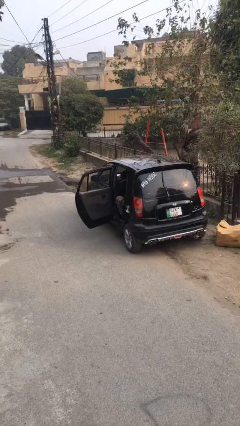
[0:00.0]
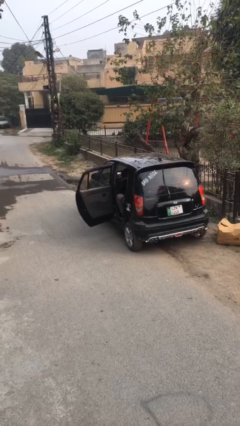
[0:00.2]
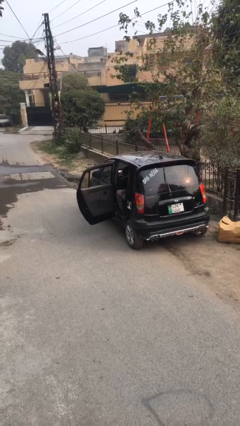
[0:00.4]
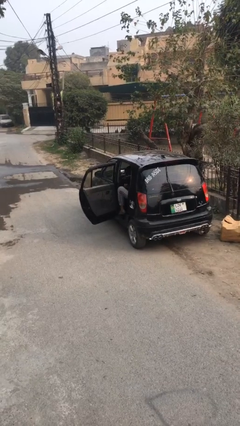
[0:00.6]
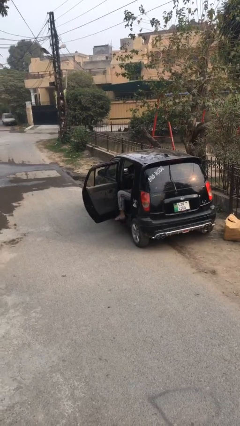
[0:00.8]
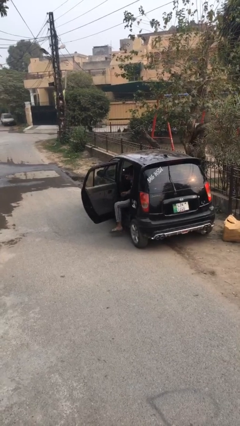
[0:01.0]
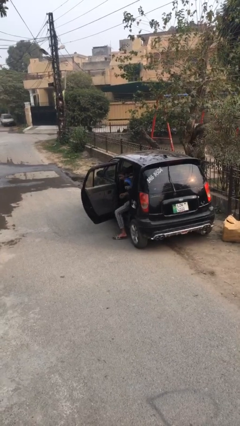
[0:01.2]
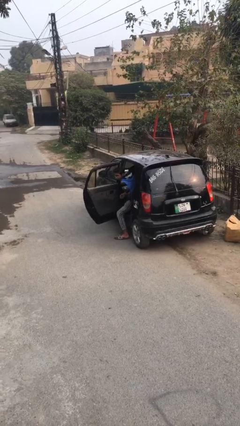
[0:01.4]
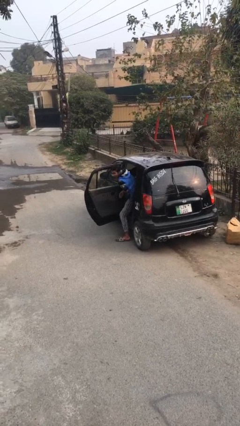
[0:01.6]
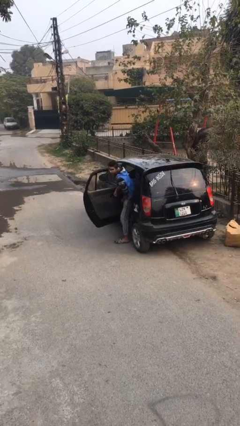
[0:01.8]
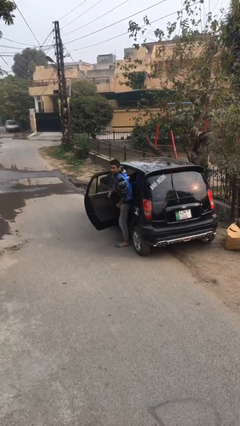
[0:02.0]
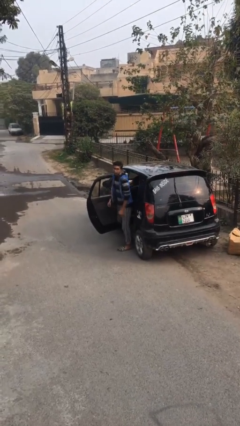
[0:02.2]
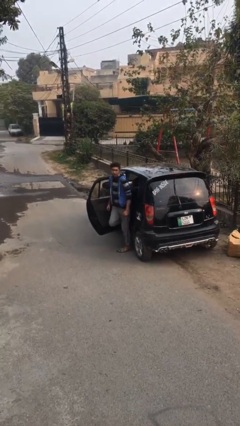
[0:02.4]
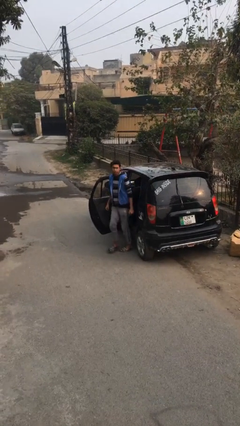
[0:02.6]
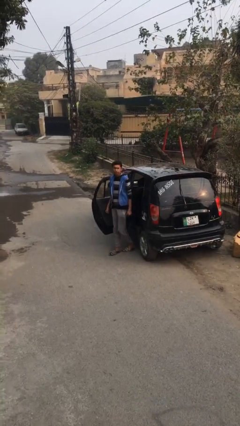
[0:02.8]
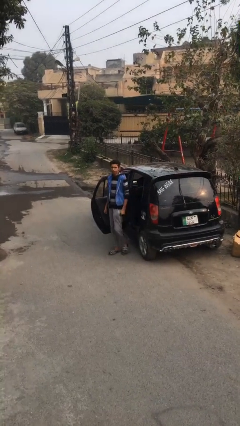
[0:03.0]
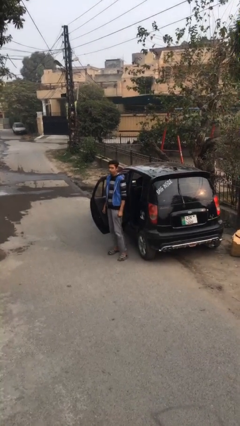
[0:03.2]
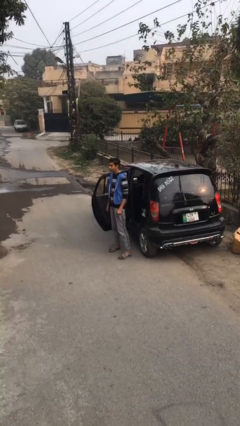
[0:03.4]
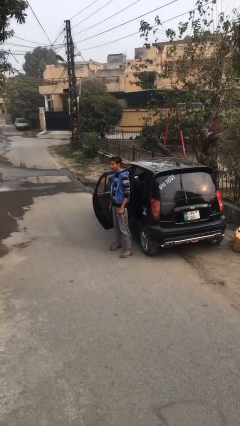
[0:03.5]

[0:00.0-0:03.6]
person exits car

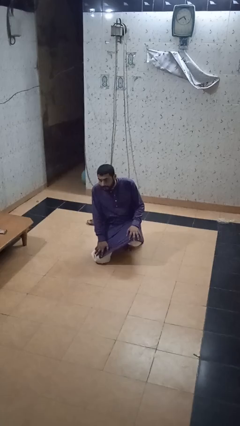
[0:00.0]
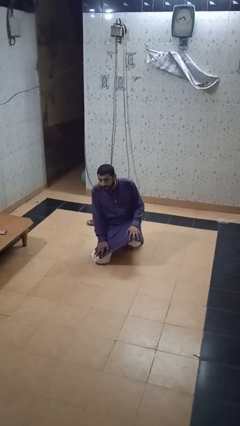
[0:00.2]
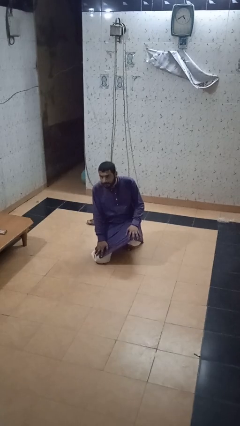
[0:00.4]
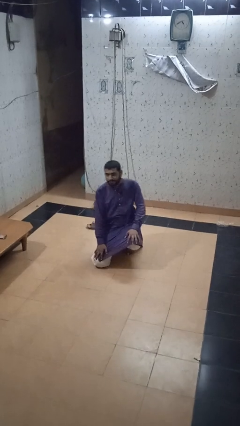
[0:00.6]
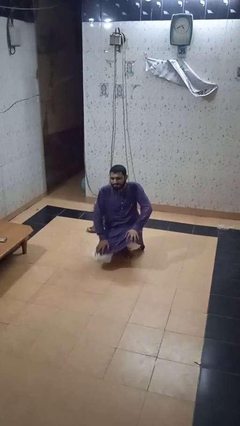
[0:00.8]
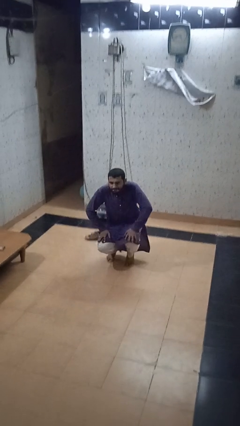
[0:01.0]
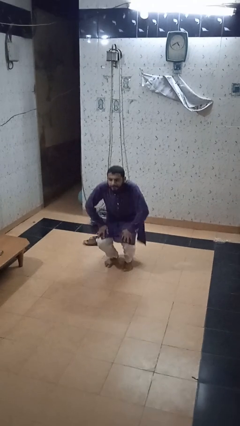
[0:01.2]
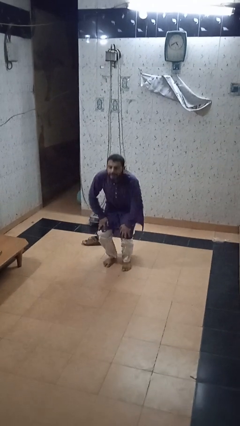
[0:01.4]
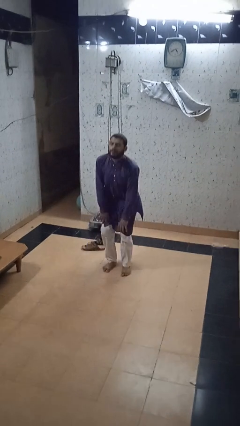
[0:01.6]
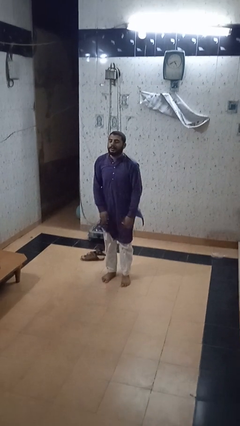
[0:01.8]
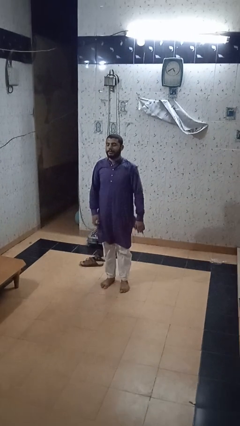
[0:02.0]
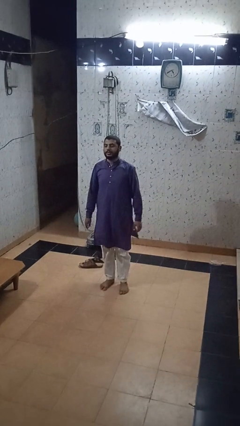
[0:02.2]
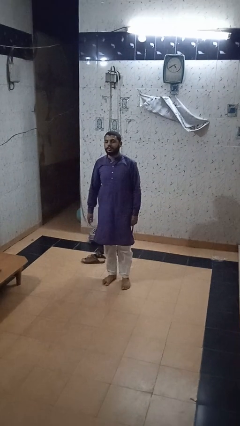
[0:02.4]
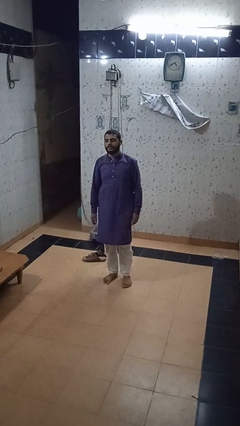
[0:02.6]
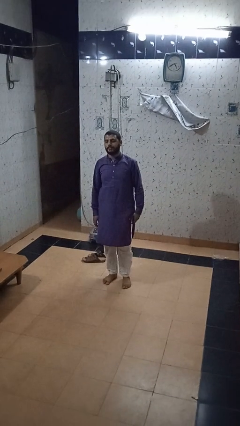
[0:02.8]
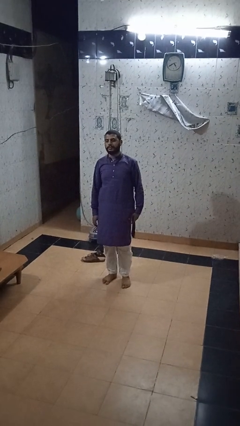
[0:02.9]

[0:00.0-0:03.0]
person stands up from floor

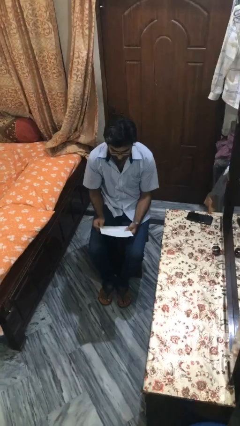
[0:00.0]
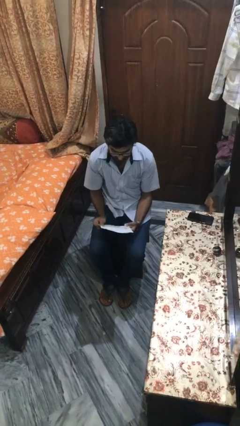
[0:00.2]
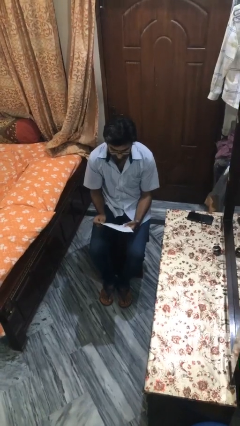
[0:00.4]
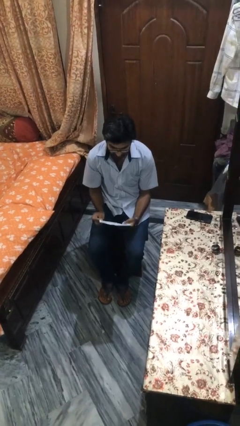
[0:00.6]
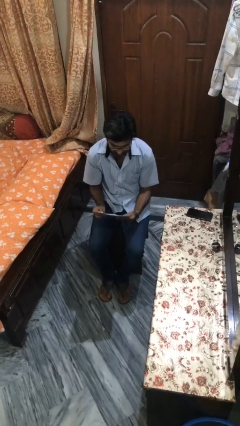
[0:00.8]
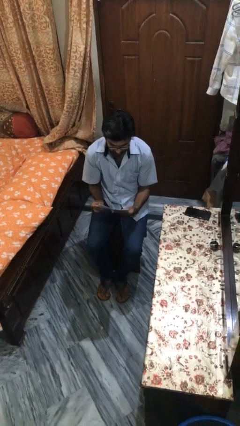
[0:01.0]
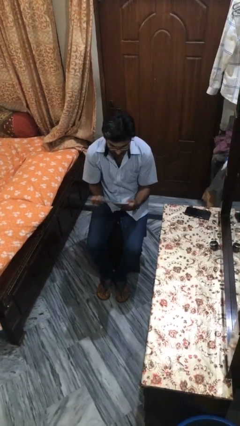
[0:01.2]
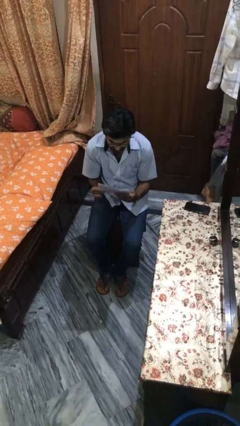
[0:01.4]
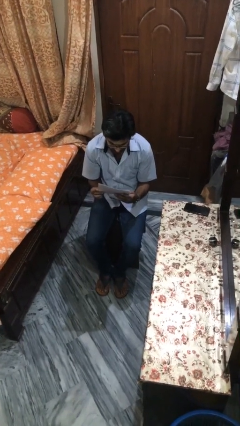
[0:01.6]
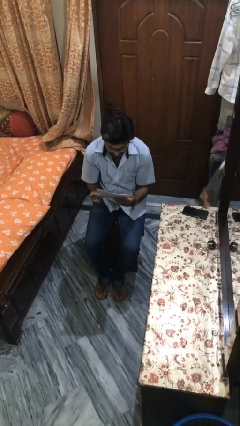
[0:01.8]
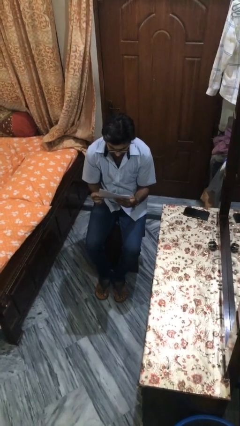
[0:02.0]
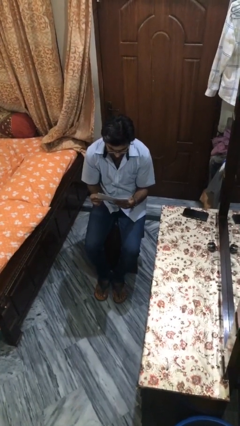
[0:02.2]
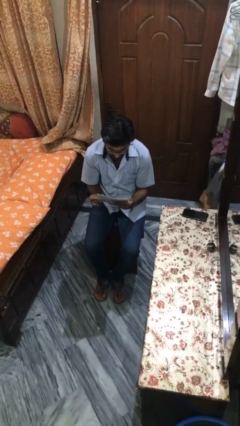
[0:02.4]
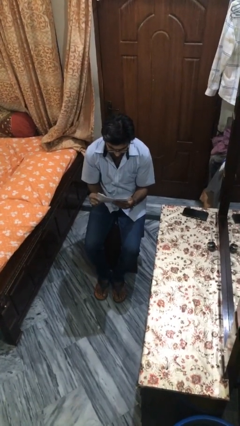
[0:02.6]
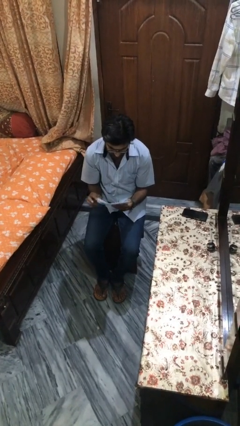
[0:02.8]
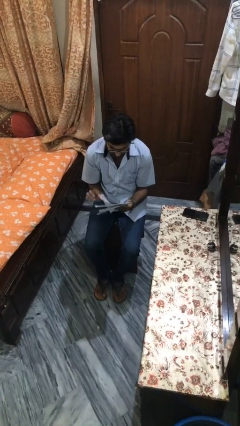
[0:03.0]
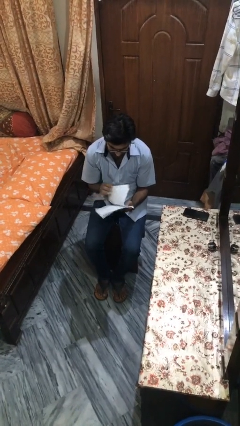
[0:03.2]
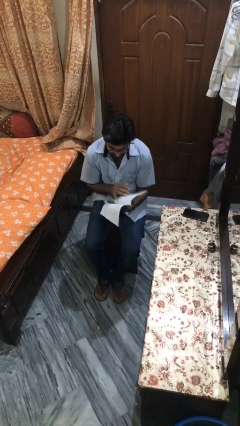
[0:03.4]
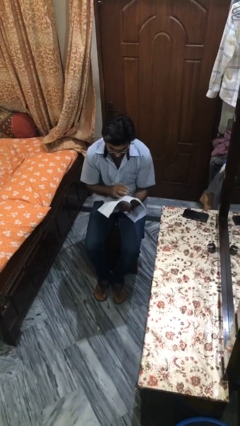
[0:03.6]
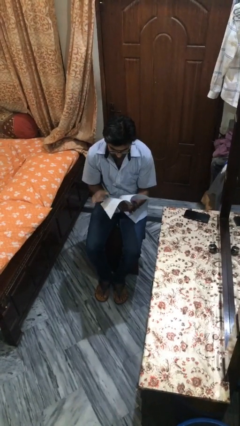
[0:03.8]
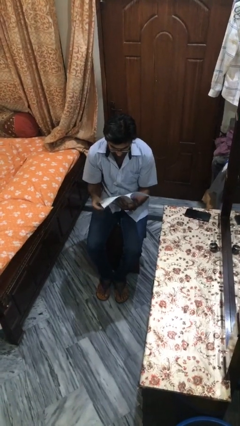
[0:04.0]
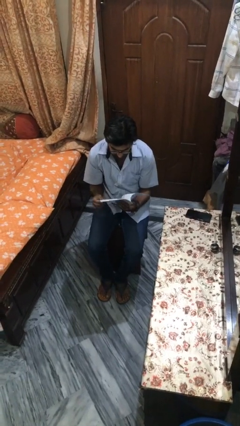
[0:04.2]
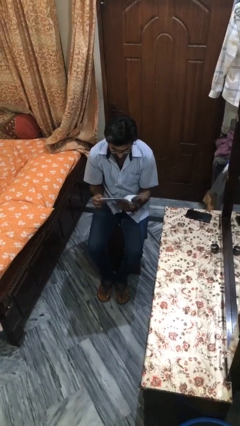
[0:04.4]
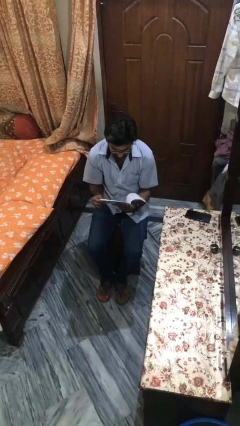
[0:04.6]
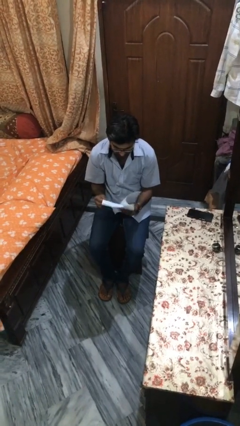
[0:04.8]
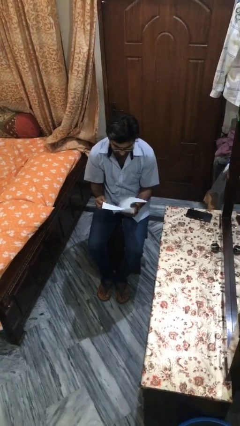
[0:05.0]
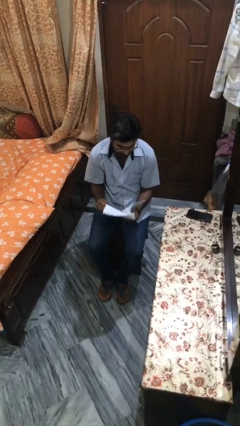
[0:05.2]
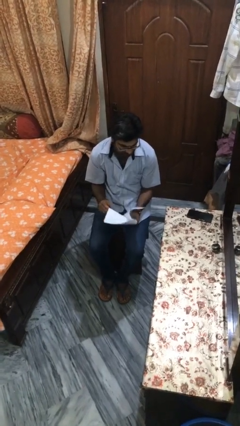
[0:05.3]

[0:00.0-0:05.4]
person reads document

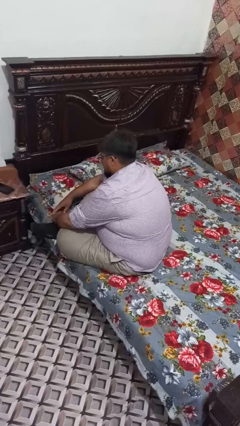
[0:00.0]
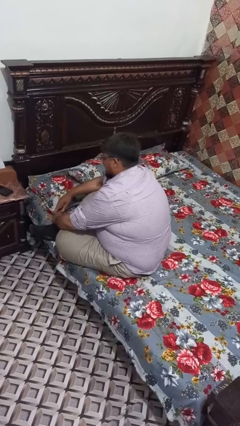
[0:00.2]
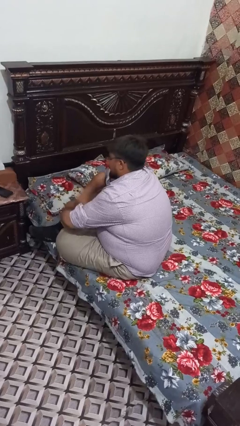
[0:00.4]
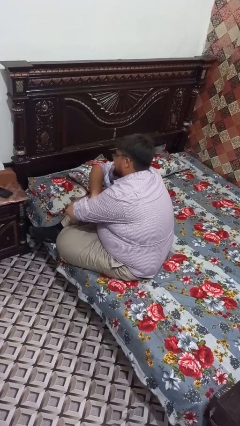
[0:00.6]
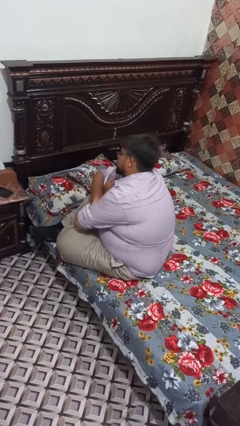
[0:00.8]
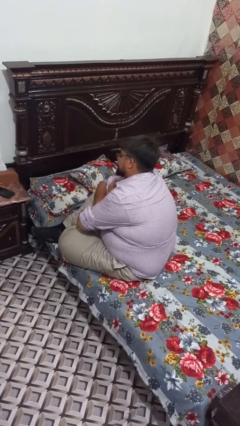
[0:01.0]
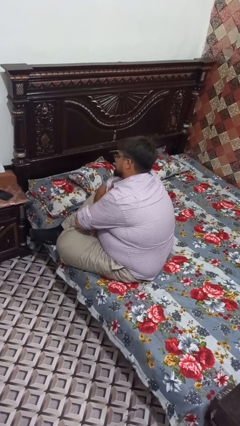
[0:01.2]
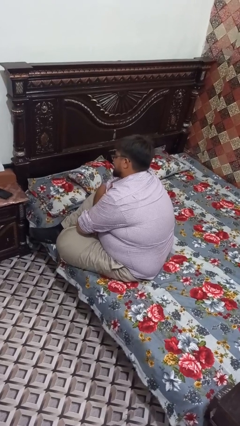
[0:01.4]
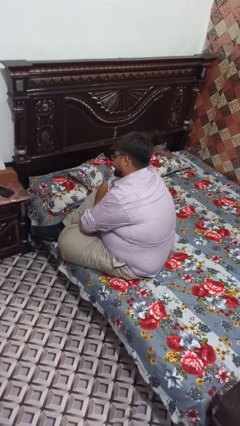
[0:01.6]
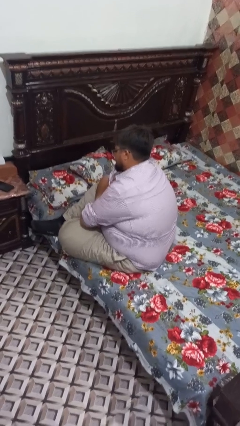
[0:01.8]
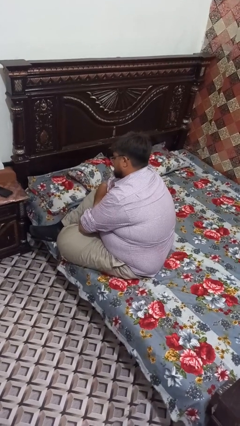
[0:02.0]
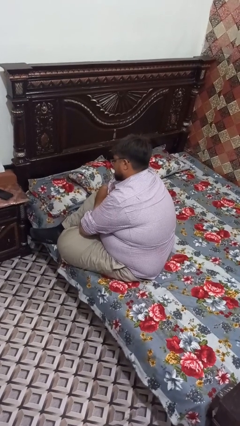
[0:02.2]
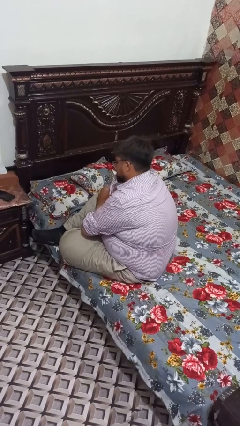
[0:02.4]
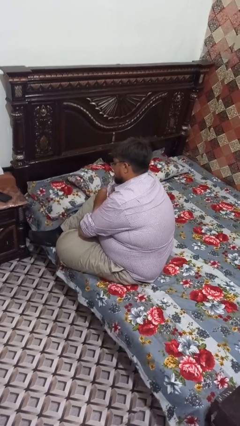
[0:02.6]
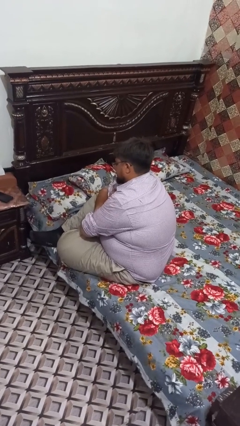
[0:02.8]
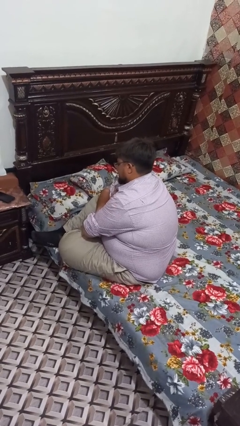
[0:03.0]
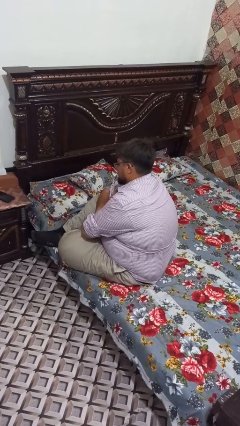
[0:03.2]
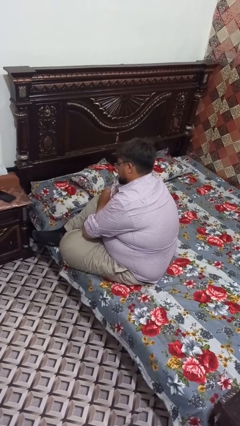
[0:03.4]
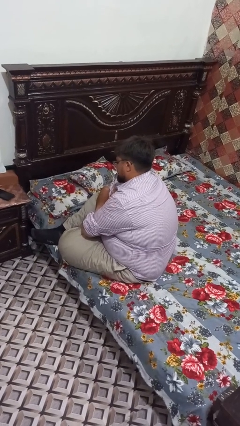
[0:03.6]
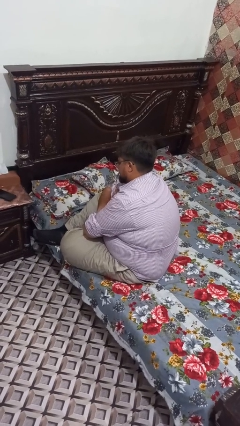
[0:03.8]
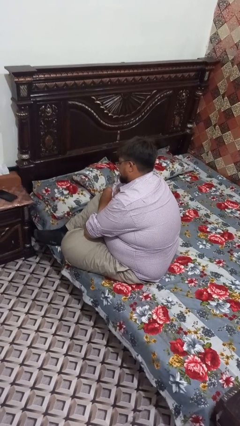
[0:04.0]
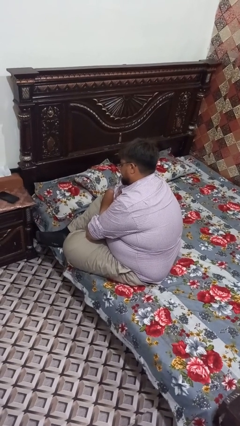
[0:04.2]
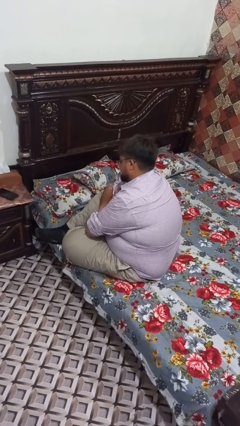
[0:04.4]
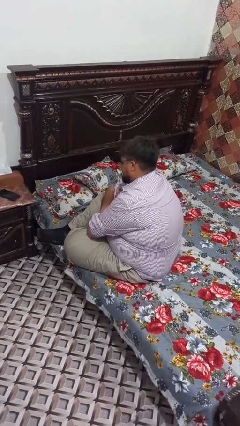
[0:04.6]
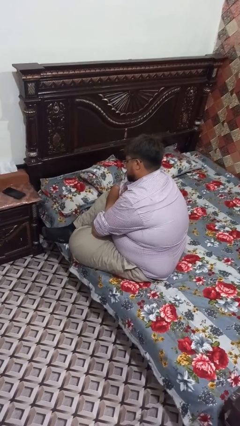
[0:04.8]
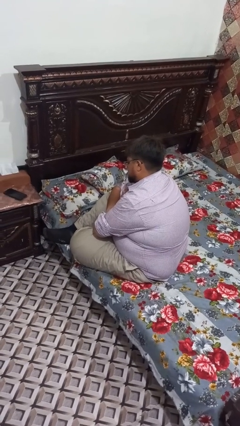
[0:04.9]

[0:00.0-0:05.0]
person crosses arms

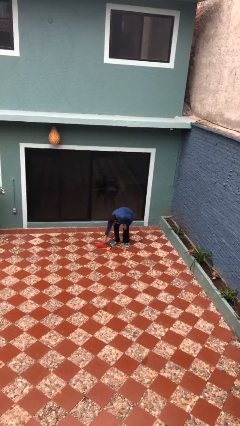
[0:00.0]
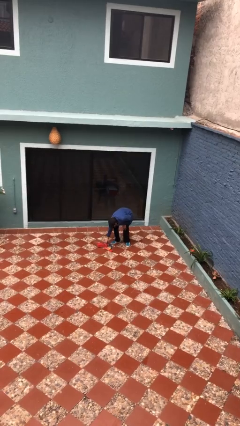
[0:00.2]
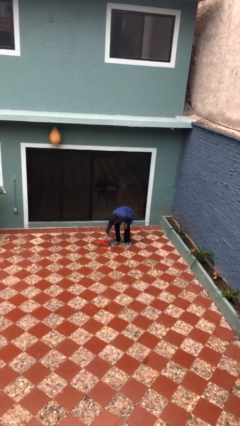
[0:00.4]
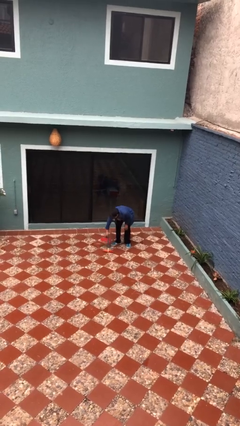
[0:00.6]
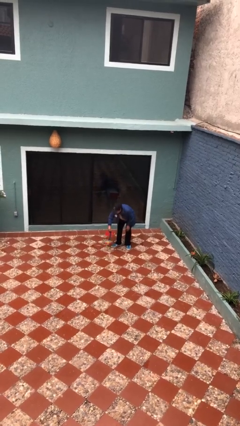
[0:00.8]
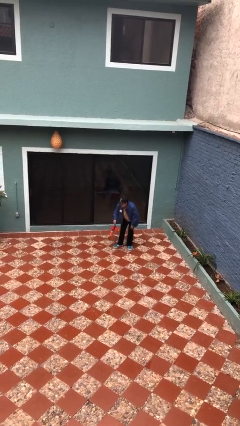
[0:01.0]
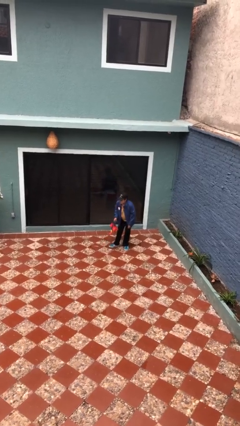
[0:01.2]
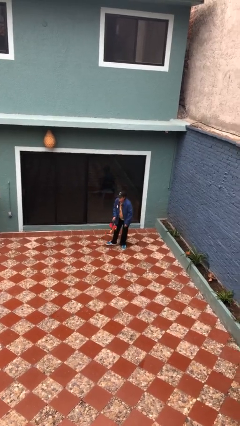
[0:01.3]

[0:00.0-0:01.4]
person picks up object from floor
